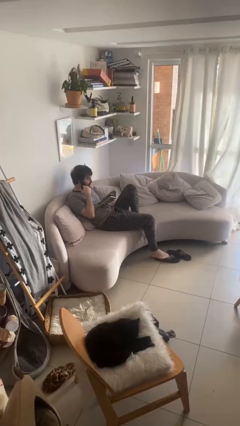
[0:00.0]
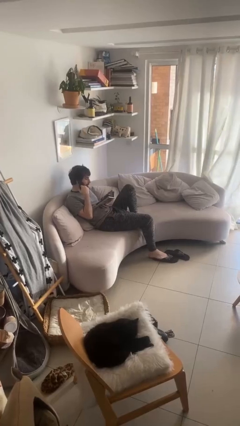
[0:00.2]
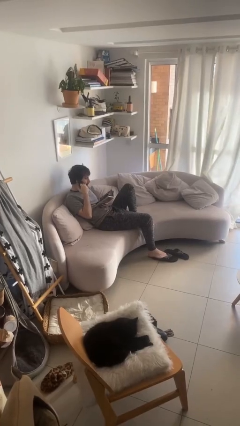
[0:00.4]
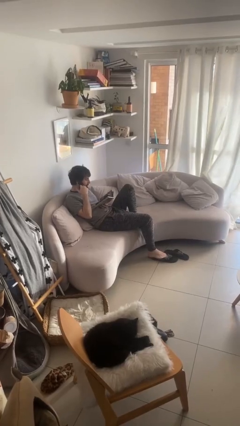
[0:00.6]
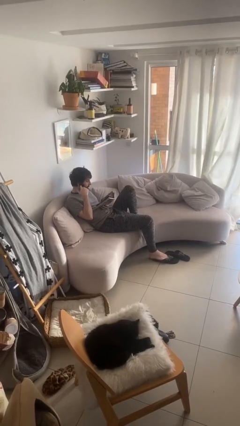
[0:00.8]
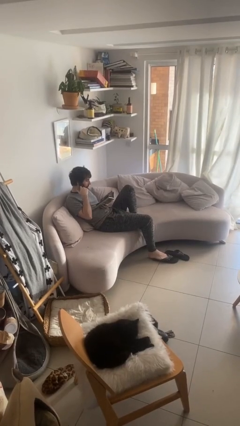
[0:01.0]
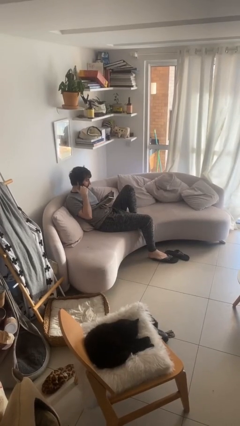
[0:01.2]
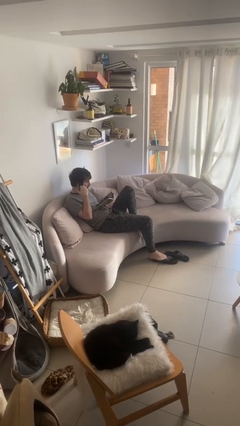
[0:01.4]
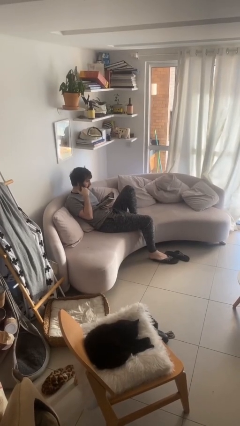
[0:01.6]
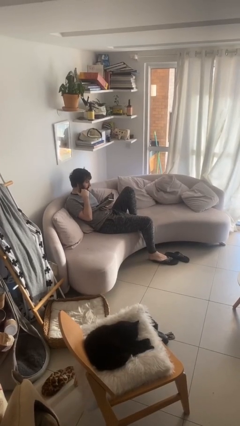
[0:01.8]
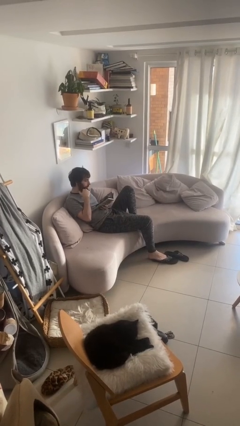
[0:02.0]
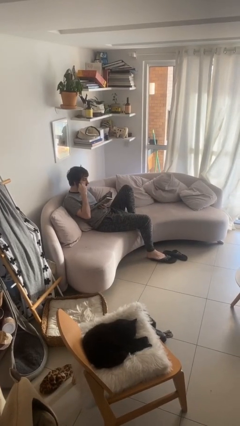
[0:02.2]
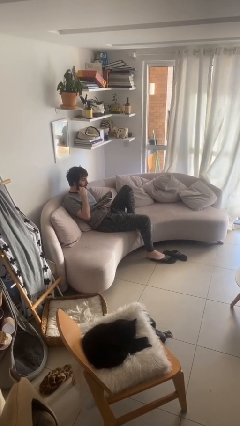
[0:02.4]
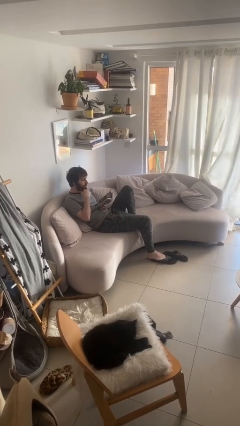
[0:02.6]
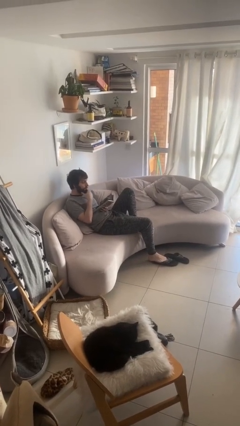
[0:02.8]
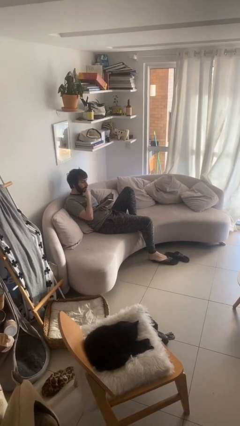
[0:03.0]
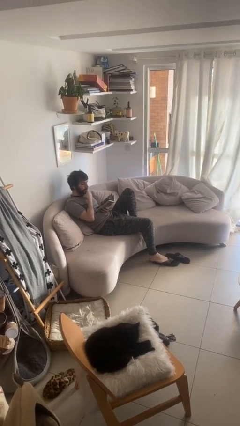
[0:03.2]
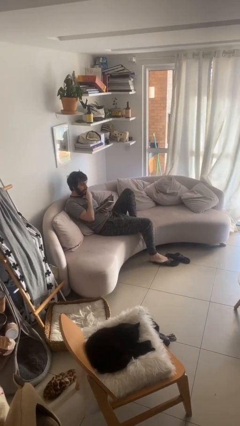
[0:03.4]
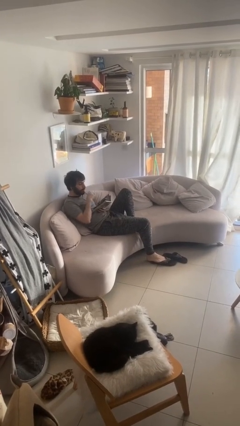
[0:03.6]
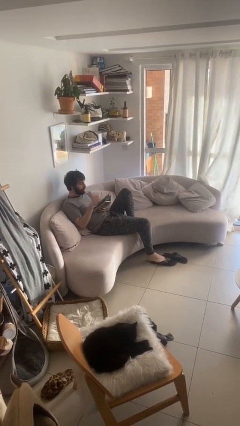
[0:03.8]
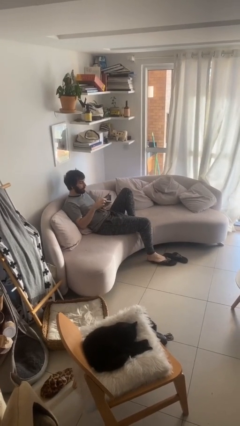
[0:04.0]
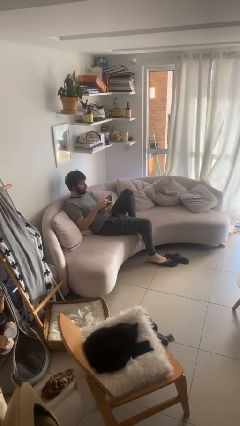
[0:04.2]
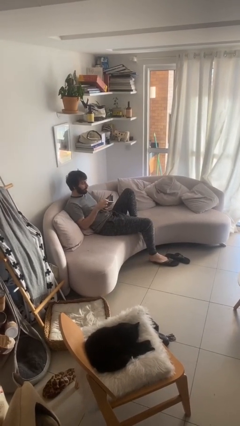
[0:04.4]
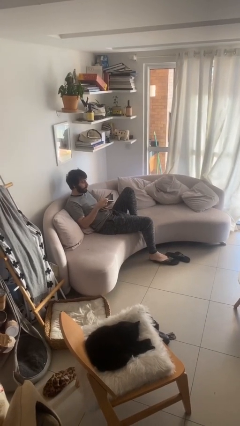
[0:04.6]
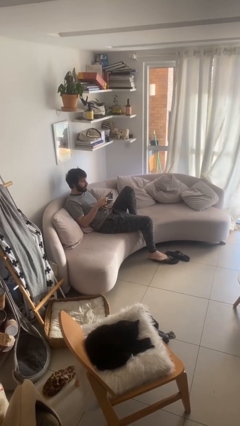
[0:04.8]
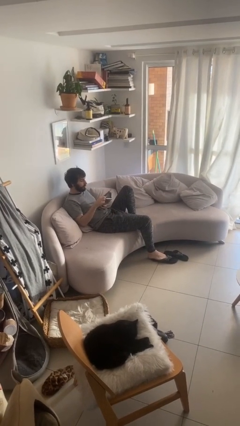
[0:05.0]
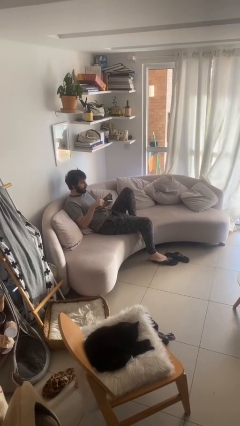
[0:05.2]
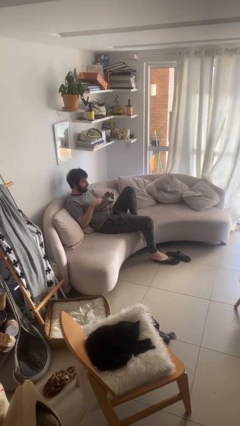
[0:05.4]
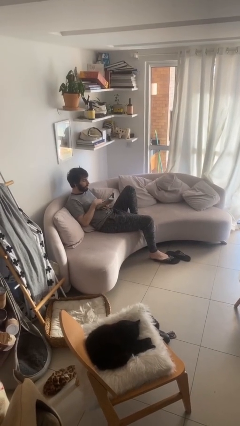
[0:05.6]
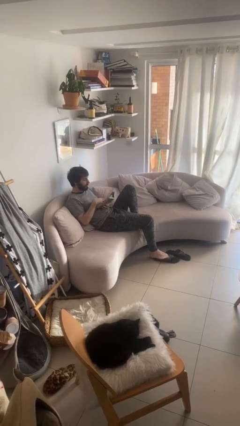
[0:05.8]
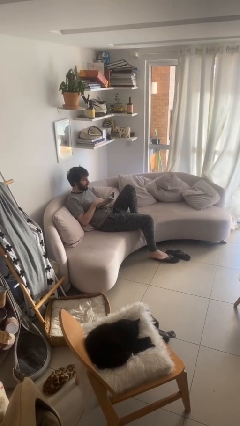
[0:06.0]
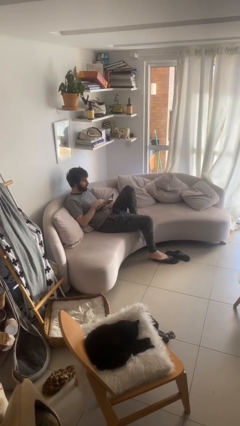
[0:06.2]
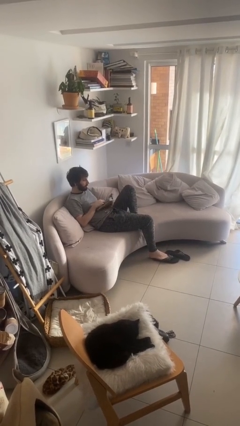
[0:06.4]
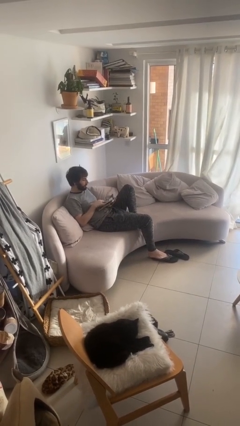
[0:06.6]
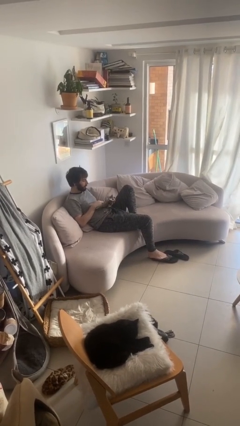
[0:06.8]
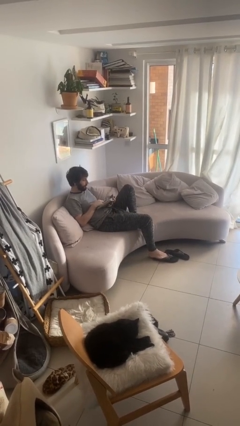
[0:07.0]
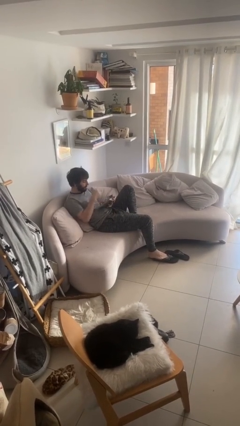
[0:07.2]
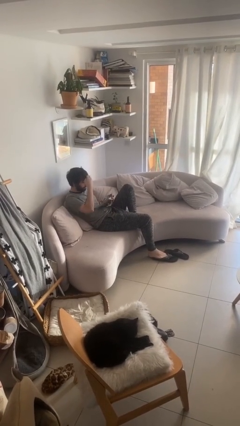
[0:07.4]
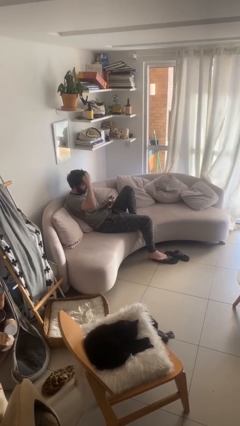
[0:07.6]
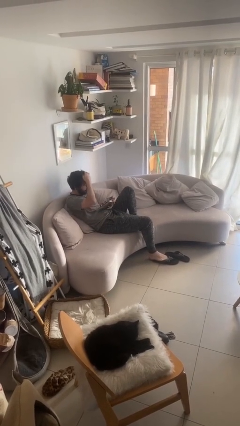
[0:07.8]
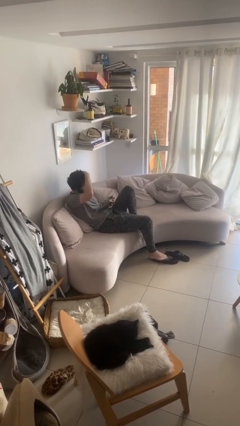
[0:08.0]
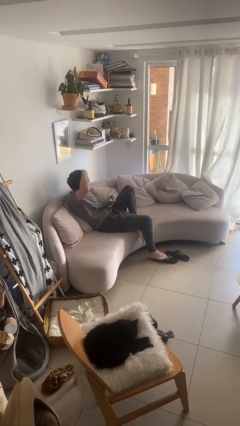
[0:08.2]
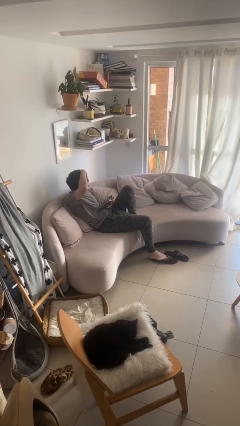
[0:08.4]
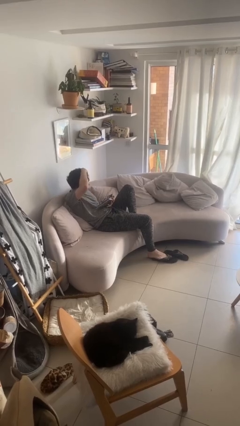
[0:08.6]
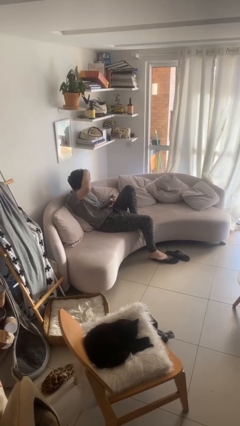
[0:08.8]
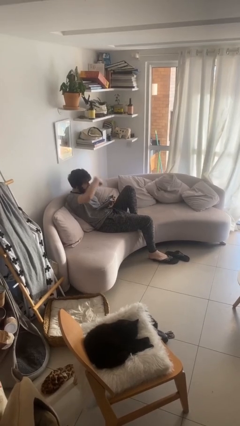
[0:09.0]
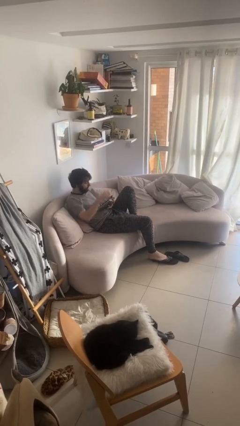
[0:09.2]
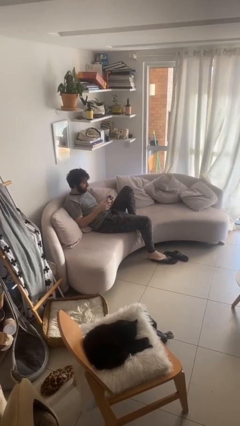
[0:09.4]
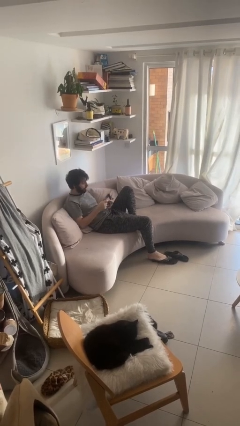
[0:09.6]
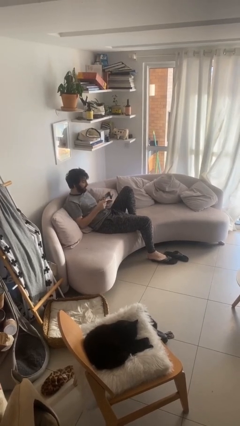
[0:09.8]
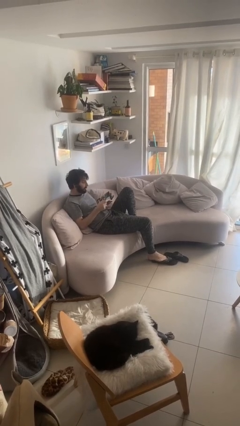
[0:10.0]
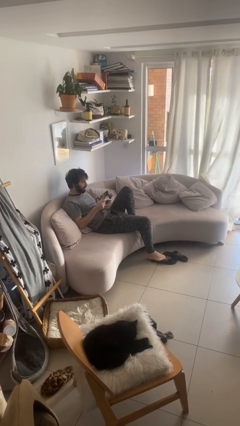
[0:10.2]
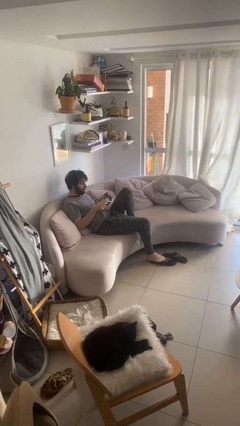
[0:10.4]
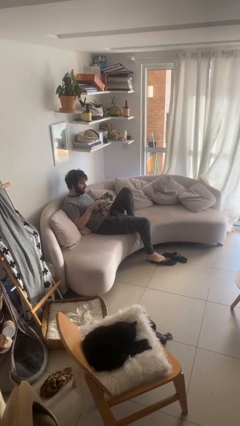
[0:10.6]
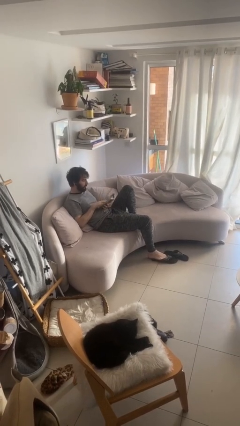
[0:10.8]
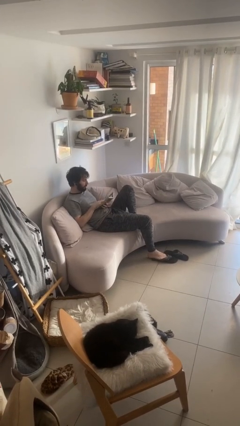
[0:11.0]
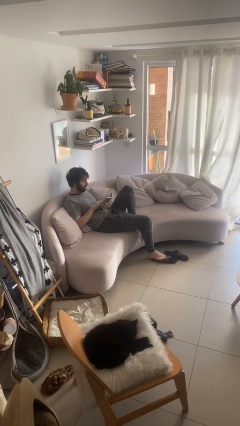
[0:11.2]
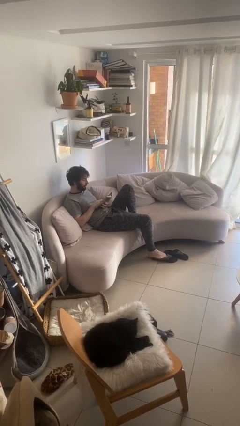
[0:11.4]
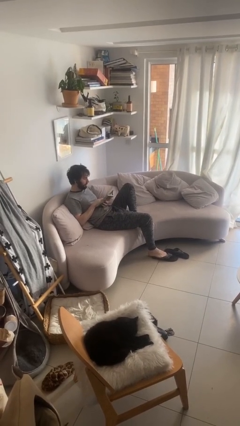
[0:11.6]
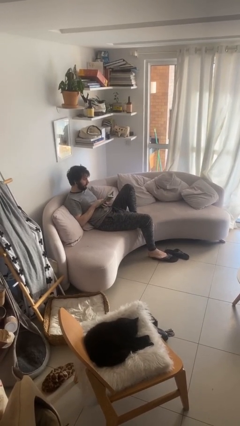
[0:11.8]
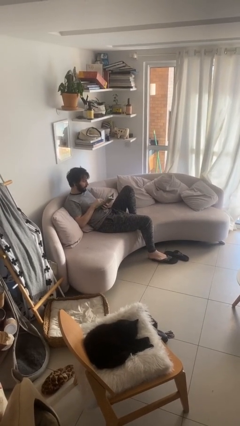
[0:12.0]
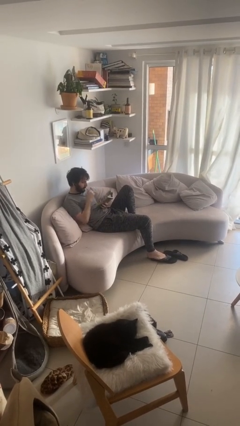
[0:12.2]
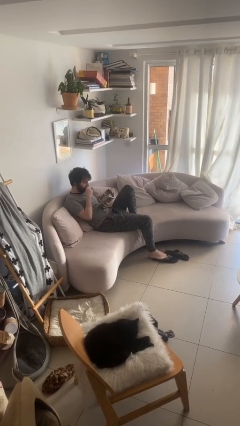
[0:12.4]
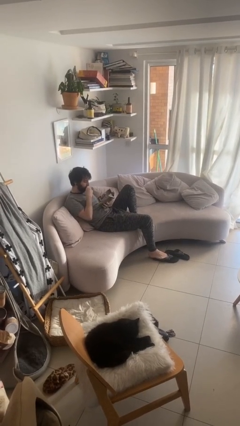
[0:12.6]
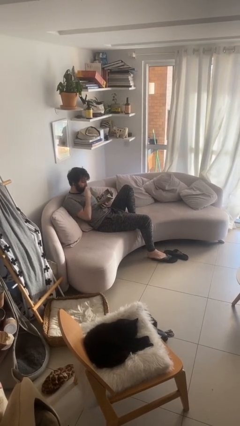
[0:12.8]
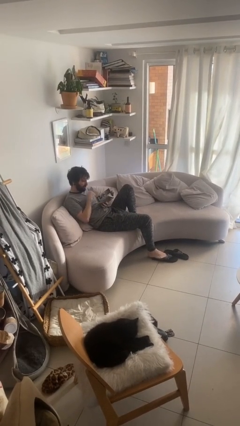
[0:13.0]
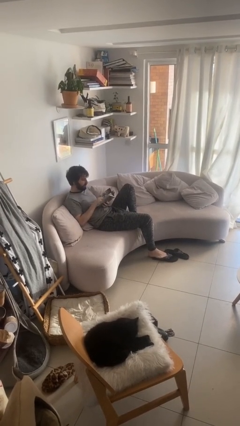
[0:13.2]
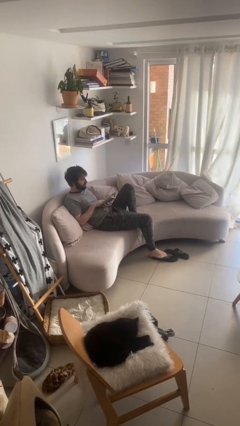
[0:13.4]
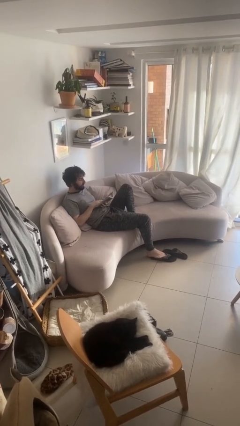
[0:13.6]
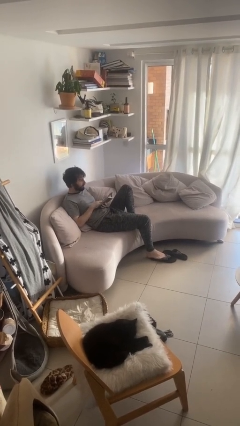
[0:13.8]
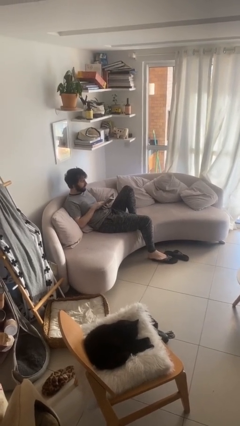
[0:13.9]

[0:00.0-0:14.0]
person reads document

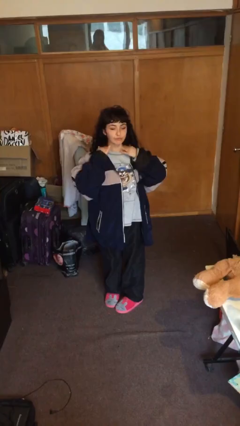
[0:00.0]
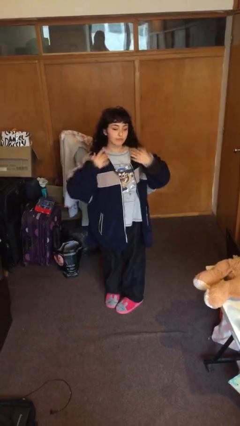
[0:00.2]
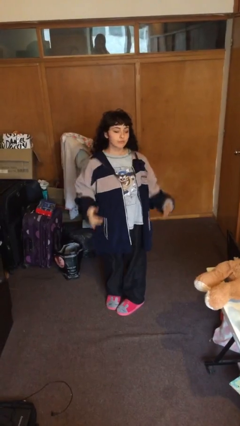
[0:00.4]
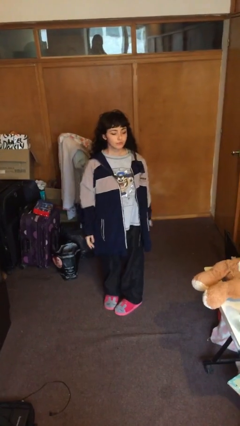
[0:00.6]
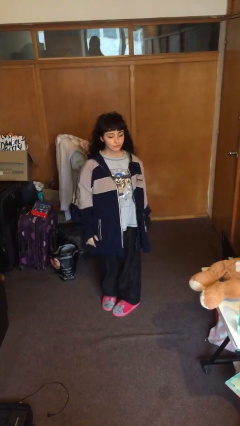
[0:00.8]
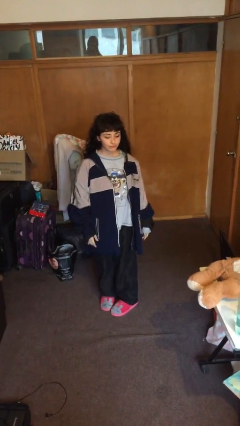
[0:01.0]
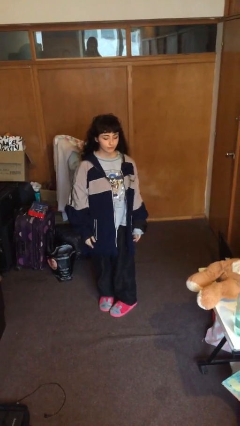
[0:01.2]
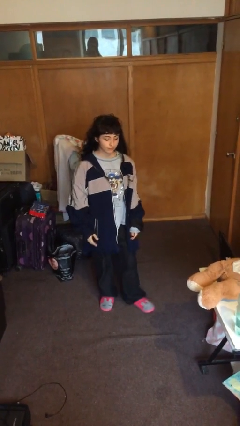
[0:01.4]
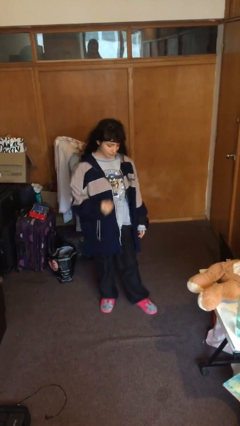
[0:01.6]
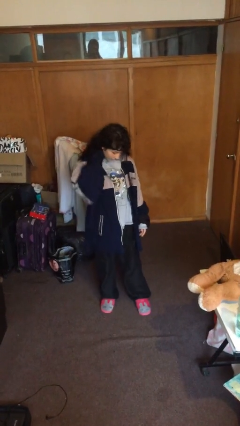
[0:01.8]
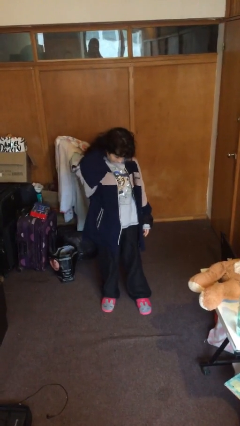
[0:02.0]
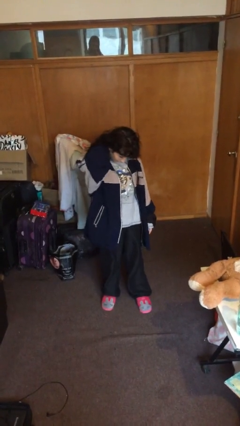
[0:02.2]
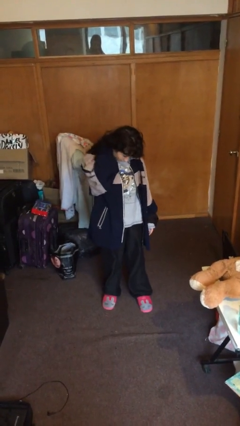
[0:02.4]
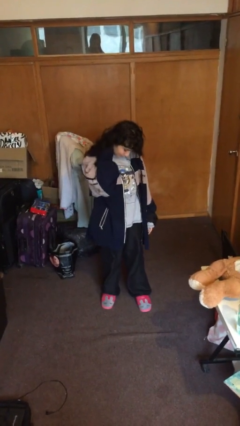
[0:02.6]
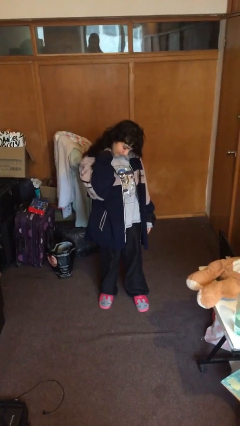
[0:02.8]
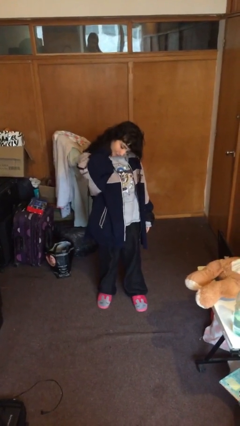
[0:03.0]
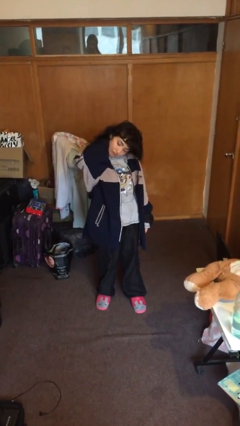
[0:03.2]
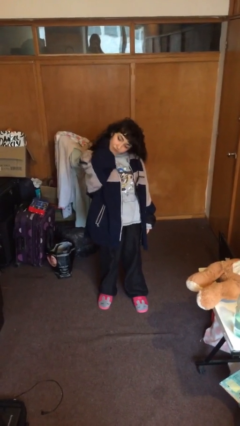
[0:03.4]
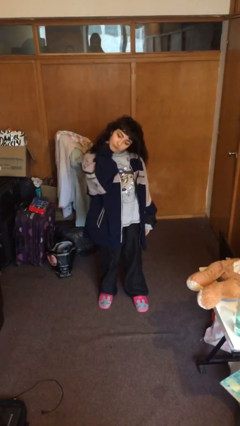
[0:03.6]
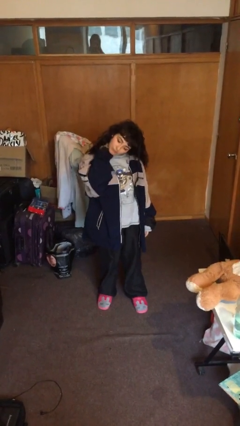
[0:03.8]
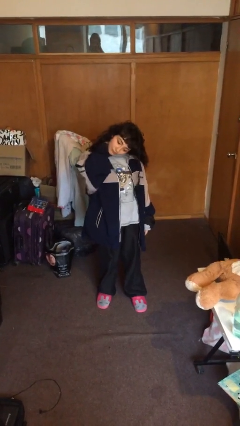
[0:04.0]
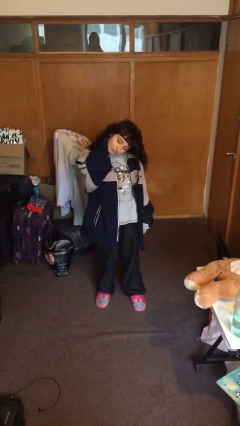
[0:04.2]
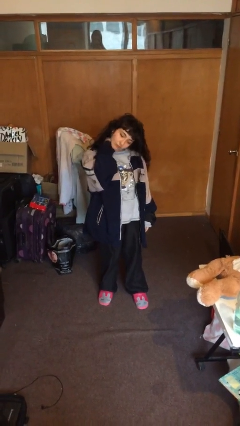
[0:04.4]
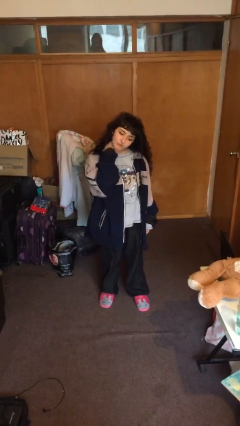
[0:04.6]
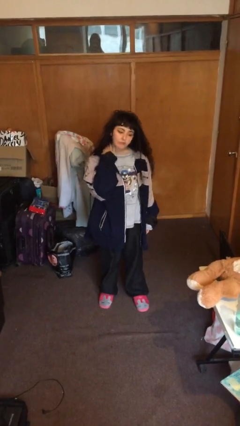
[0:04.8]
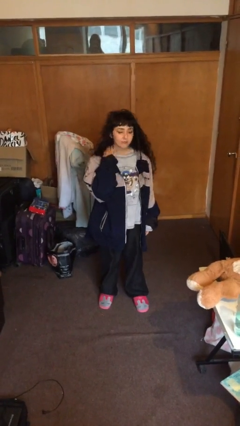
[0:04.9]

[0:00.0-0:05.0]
person rubs neck
